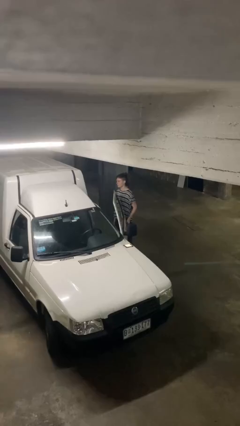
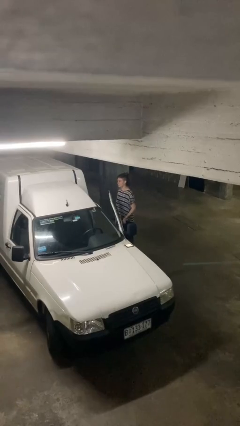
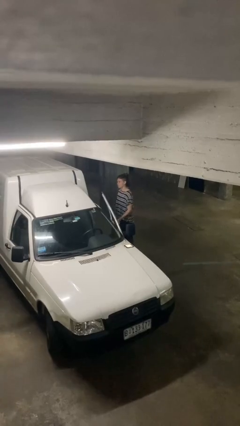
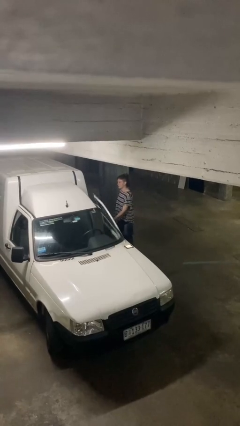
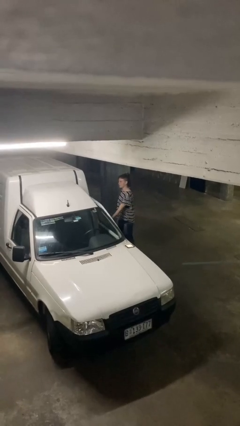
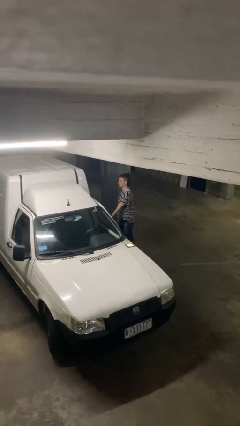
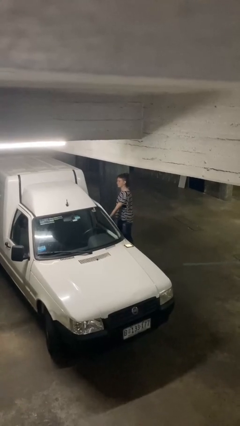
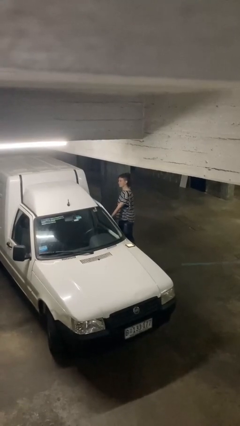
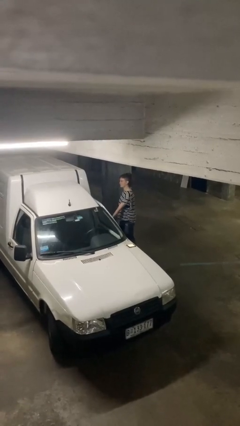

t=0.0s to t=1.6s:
person closes car door

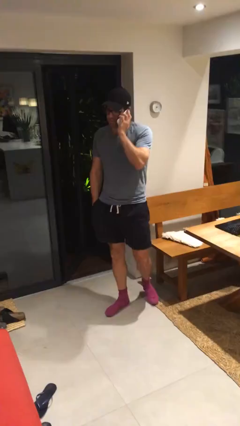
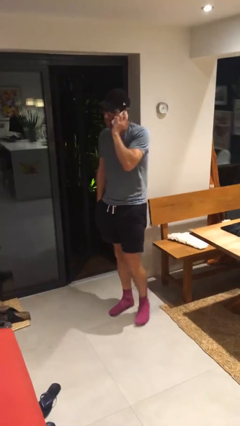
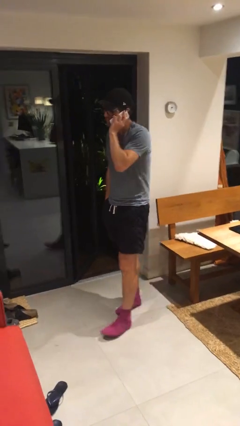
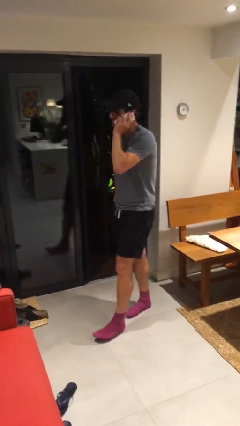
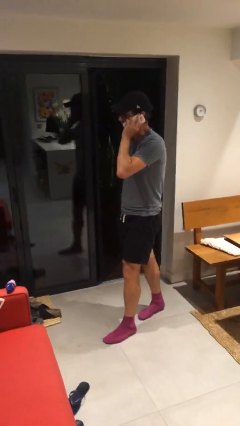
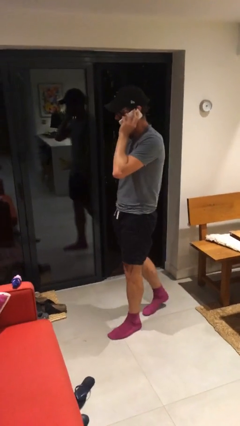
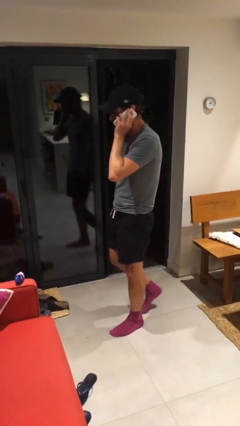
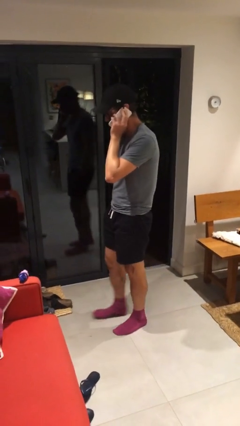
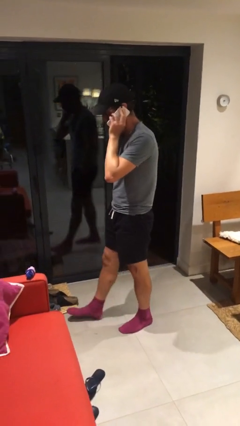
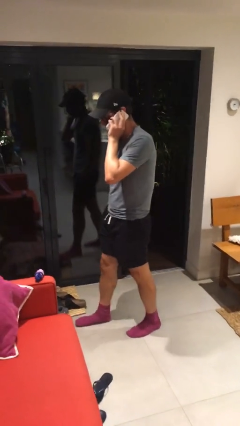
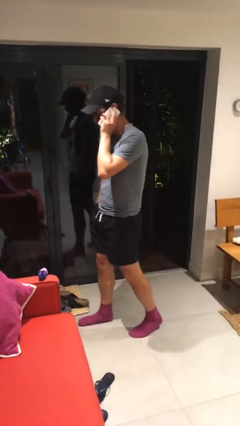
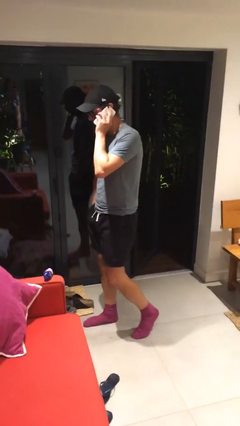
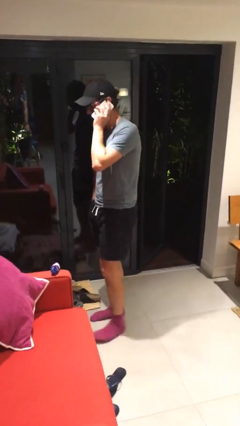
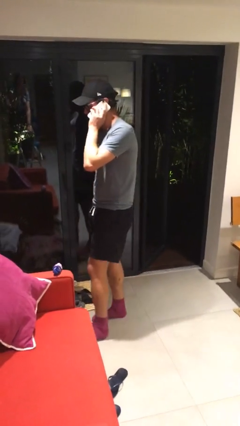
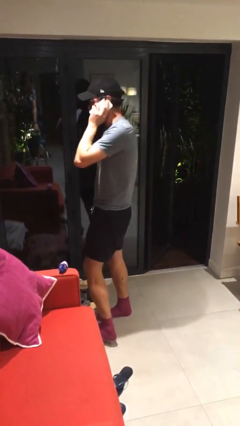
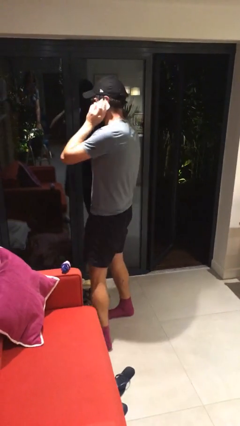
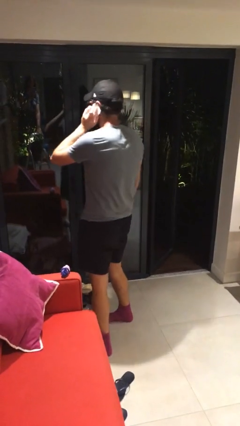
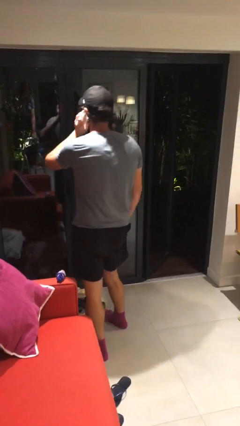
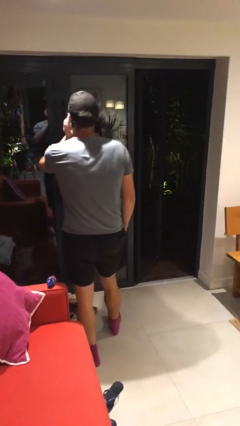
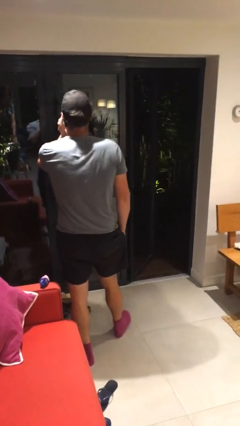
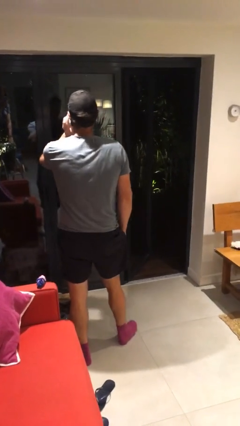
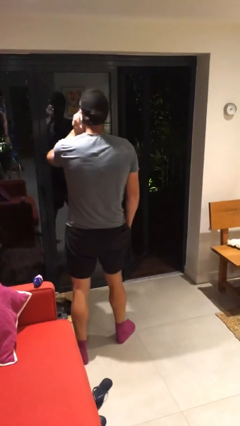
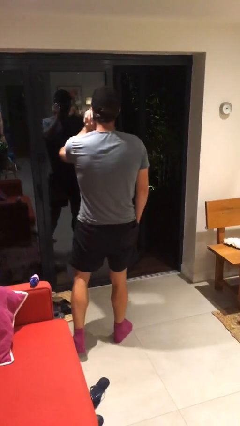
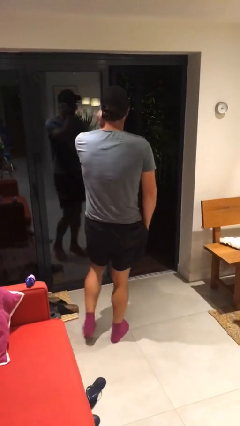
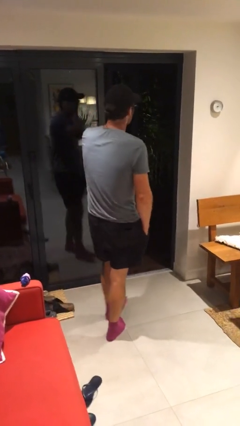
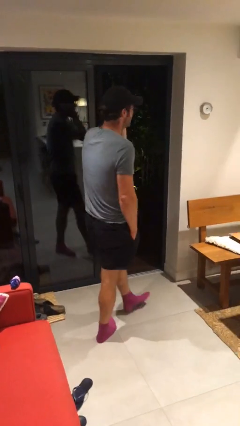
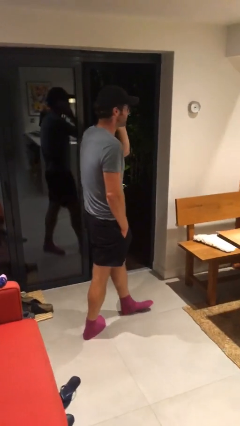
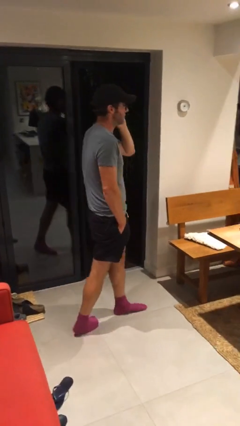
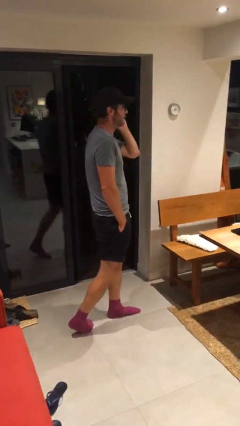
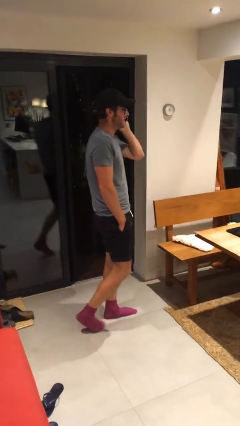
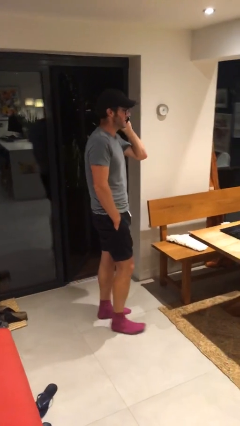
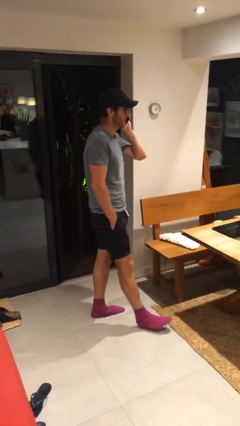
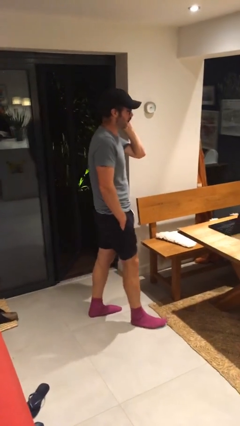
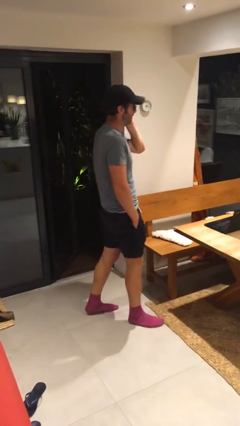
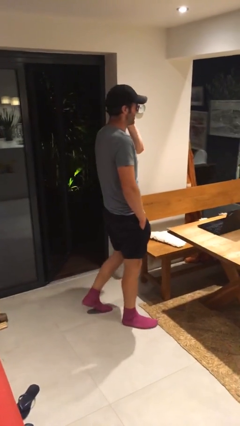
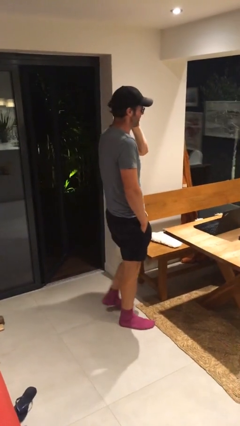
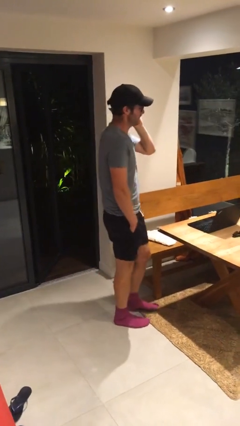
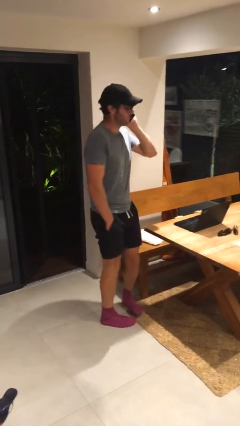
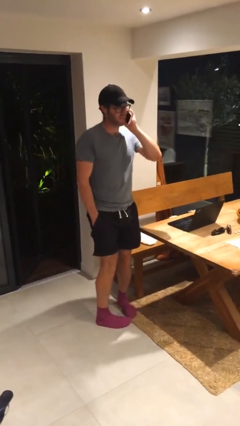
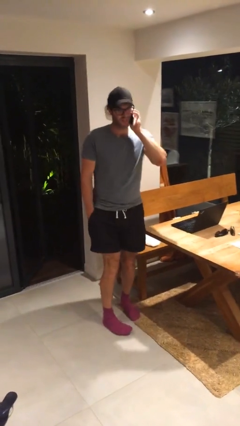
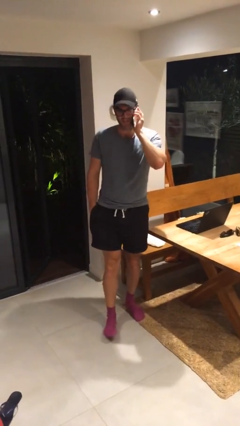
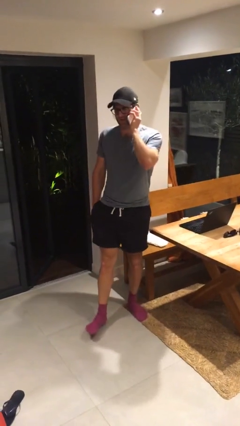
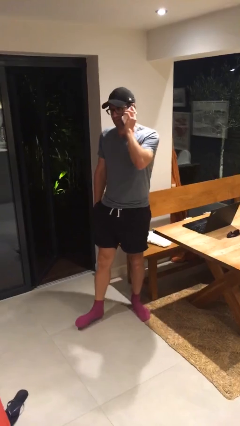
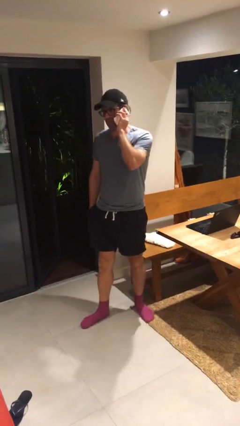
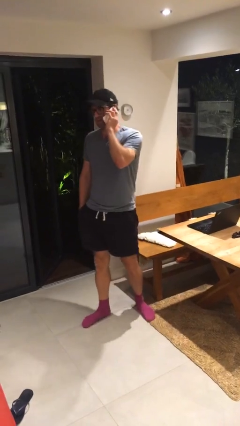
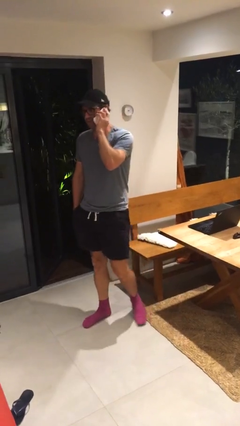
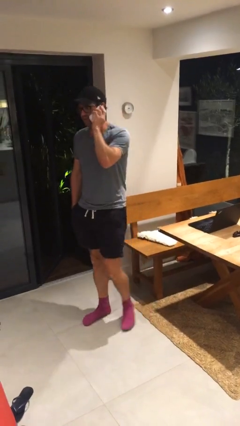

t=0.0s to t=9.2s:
person talks on phone

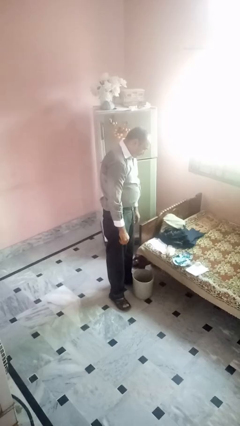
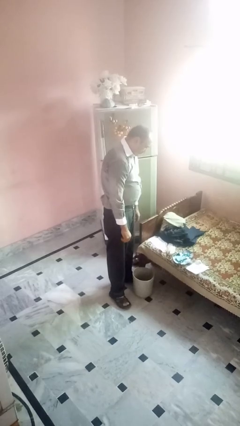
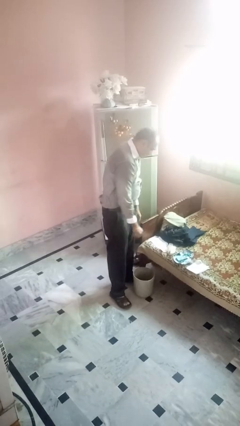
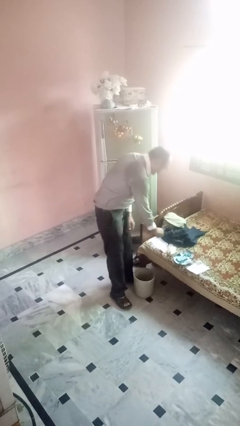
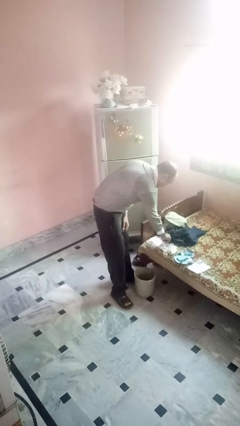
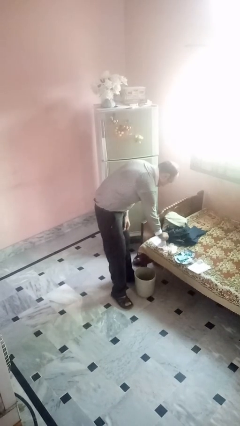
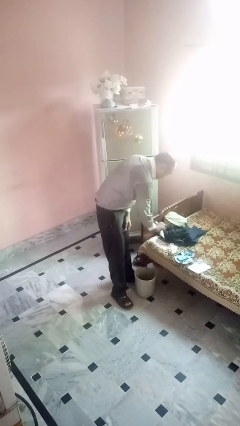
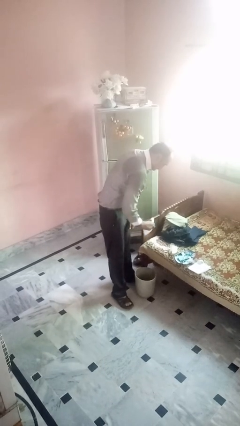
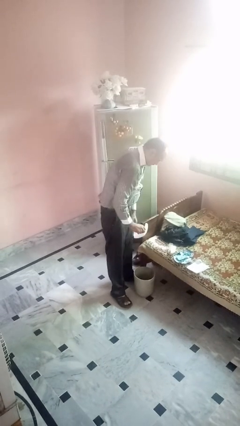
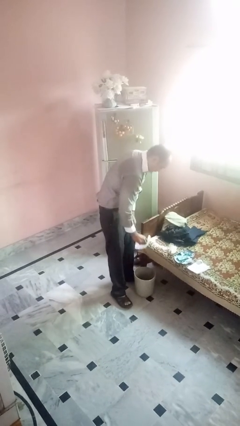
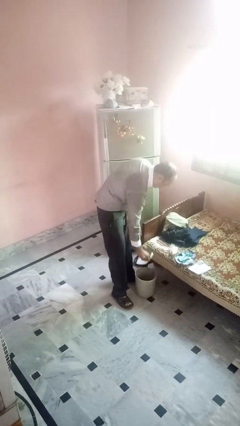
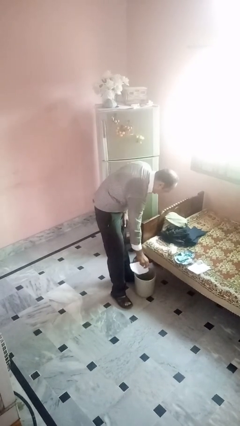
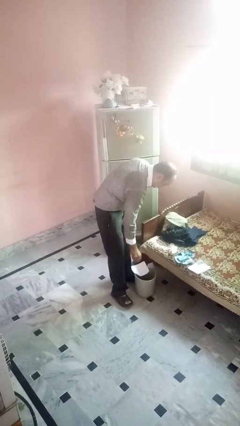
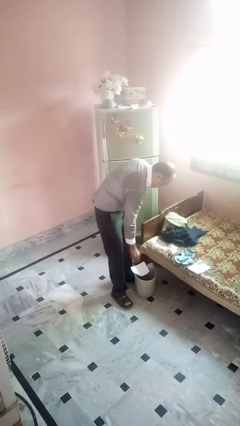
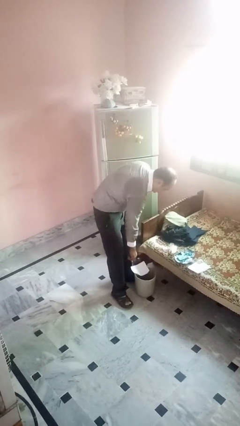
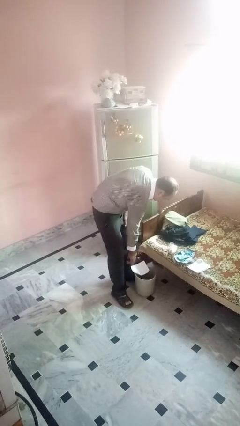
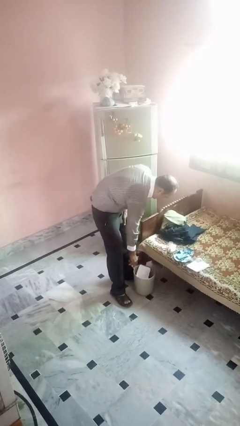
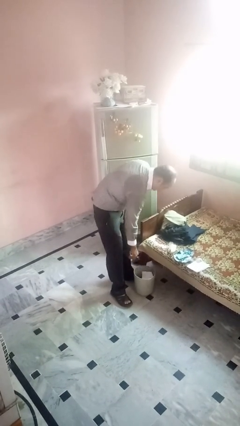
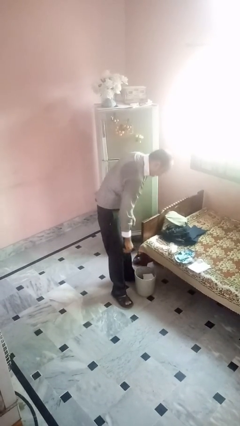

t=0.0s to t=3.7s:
person discards trash

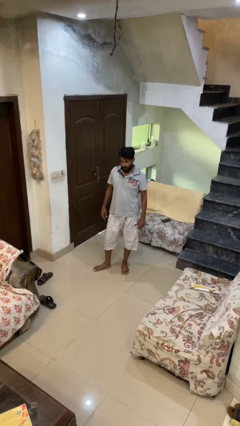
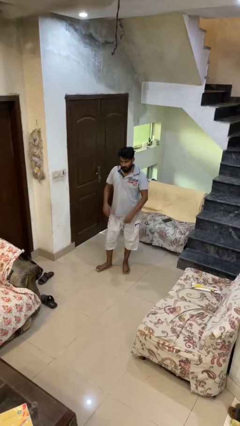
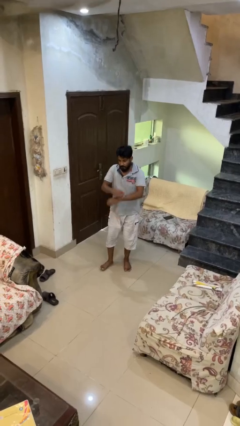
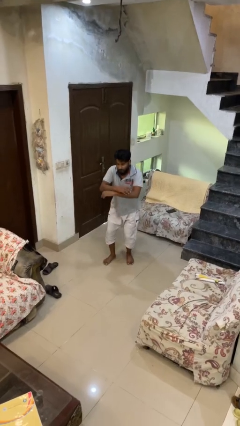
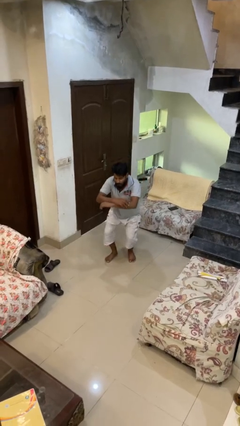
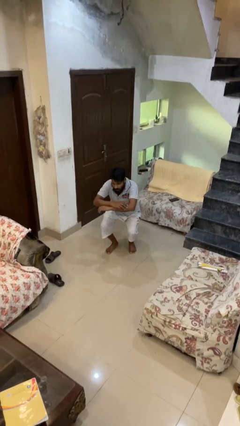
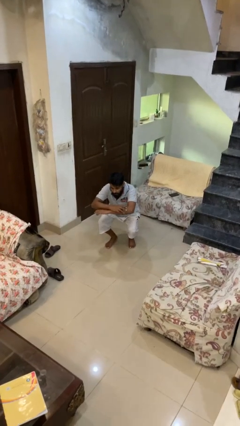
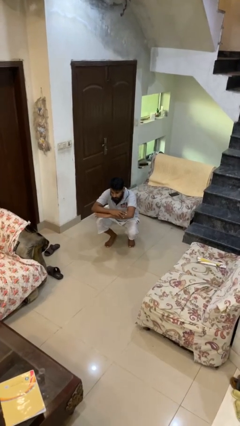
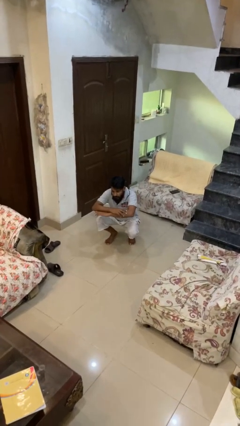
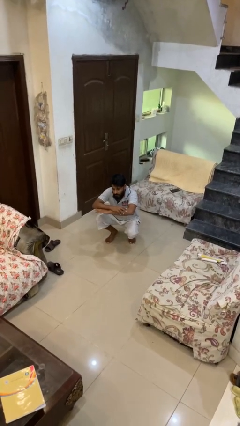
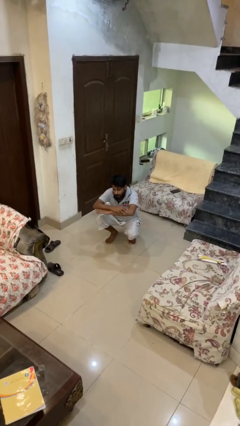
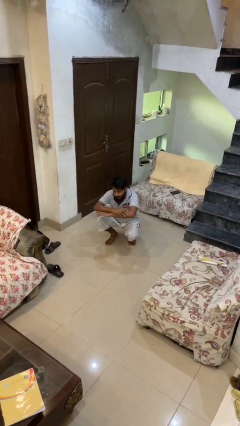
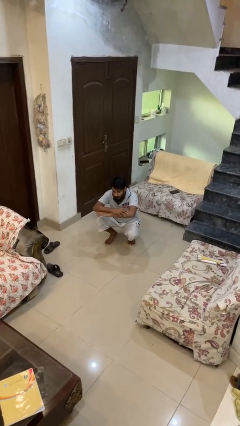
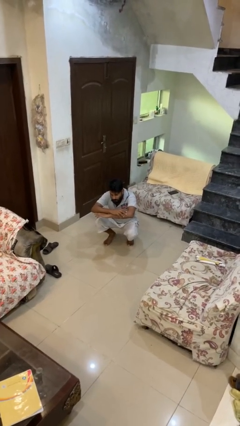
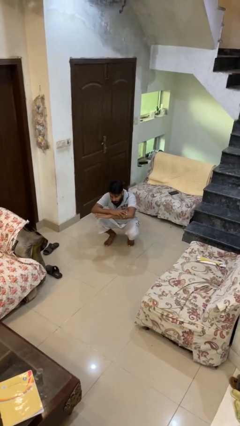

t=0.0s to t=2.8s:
person squats

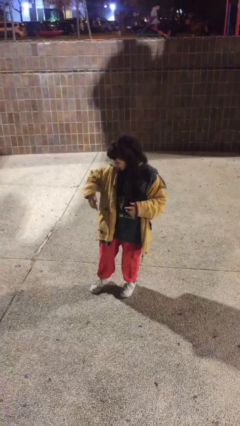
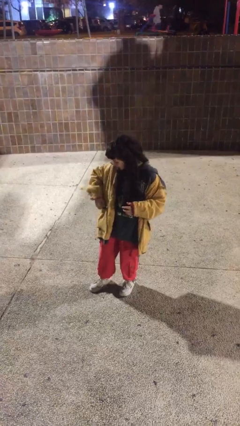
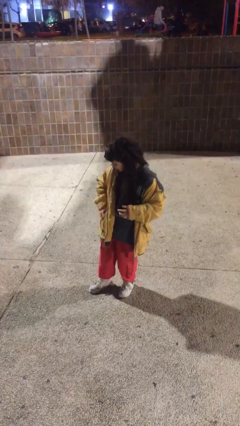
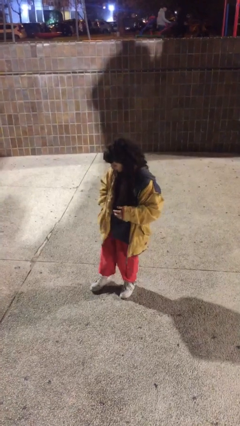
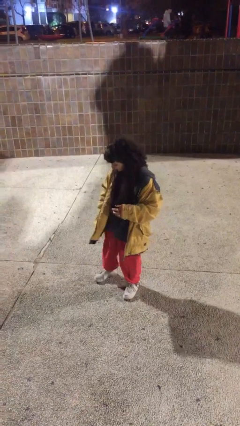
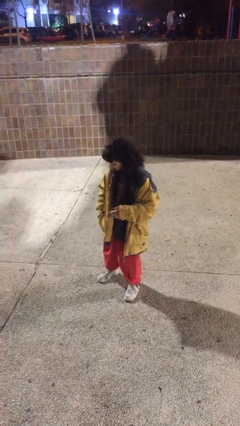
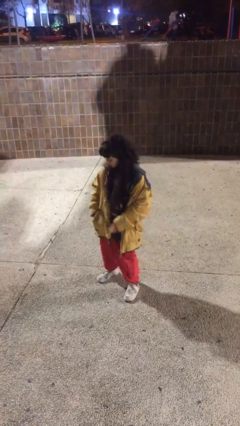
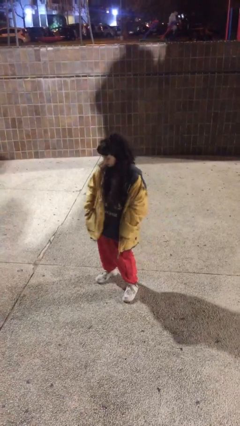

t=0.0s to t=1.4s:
person puts phone into pocket
